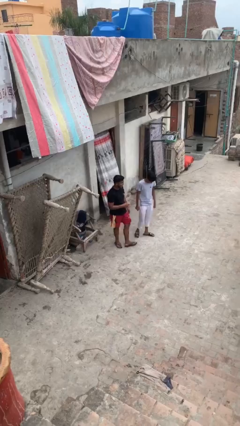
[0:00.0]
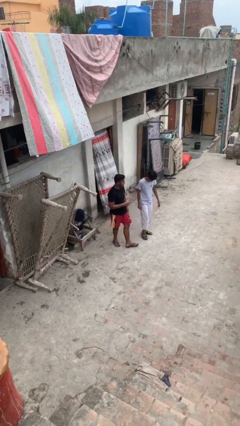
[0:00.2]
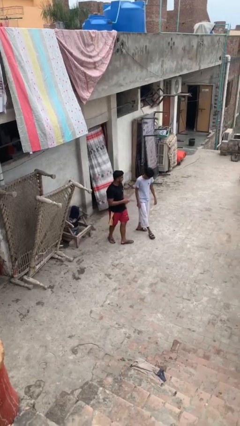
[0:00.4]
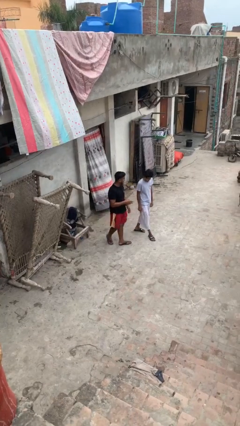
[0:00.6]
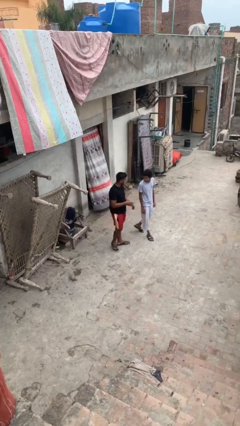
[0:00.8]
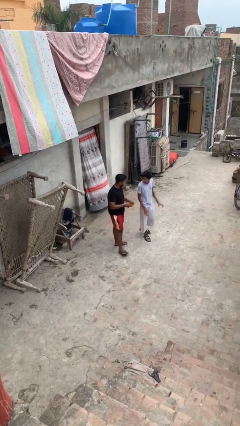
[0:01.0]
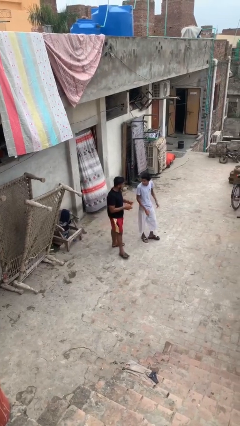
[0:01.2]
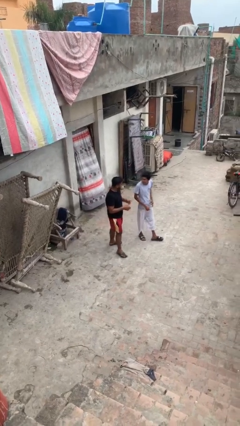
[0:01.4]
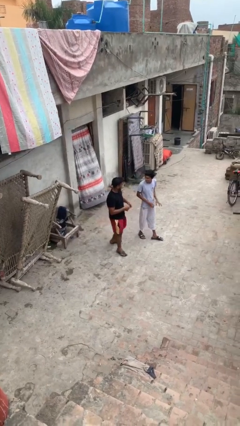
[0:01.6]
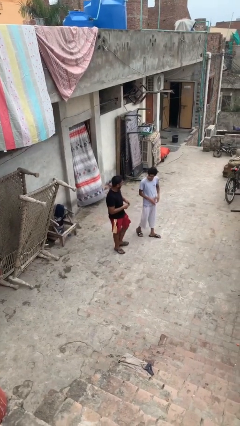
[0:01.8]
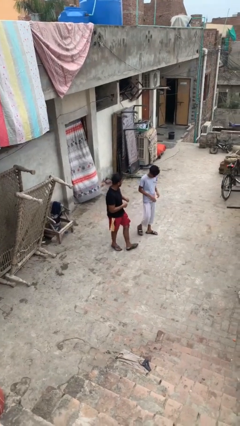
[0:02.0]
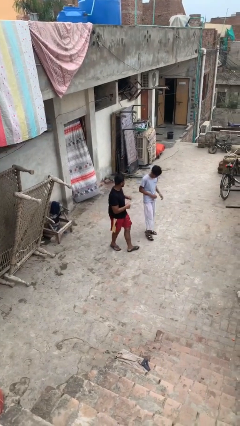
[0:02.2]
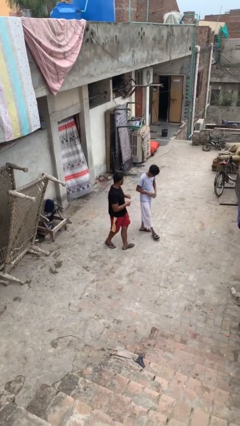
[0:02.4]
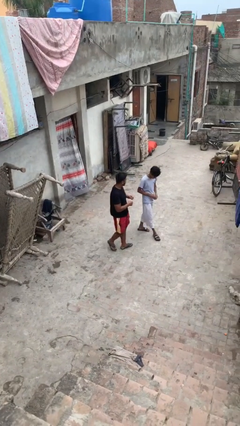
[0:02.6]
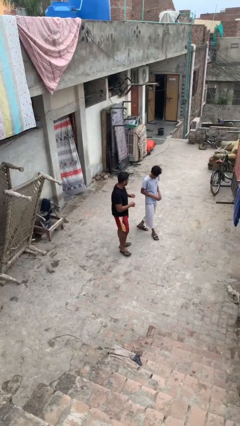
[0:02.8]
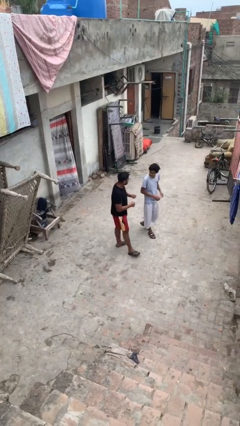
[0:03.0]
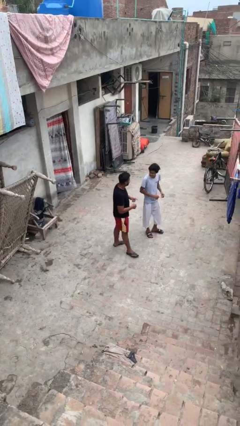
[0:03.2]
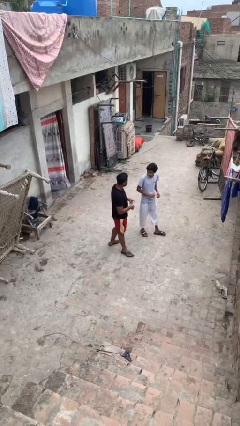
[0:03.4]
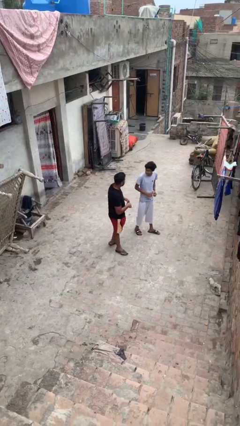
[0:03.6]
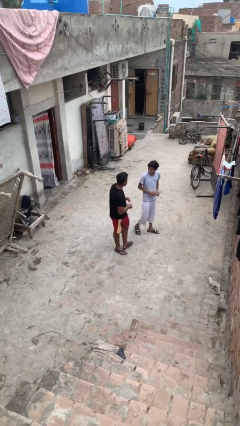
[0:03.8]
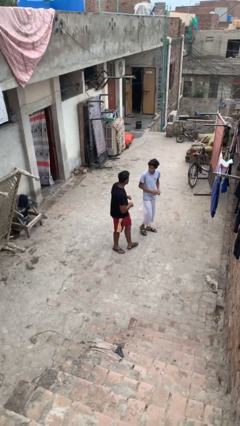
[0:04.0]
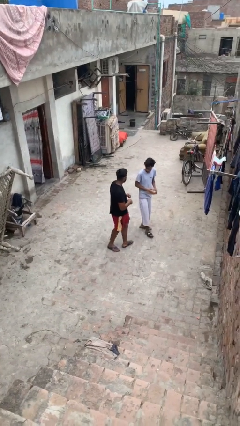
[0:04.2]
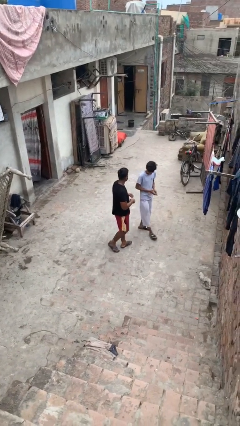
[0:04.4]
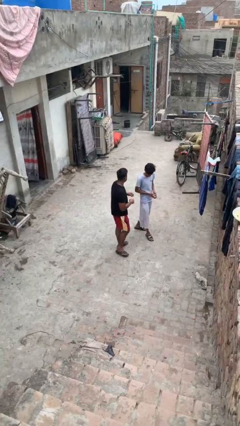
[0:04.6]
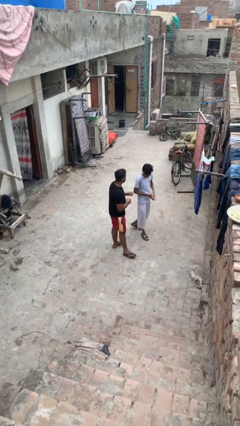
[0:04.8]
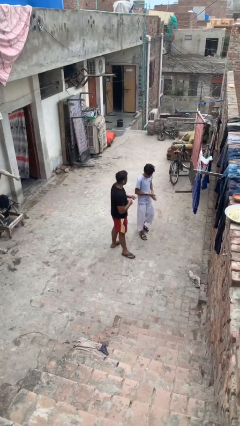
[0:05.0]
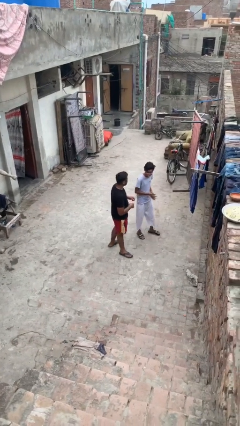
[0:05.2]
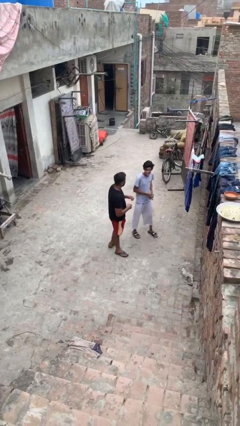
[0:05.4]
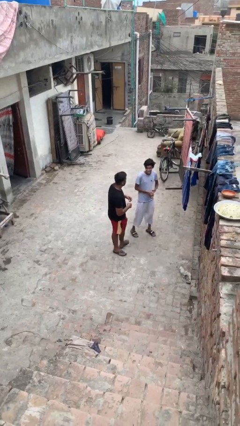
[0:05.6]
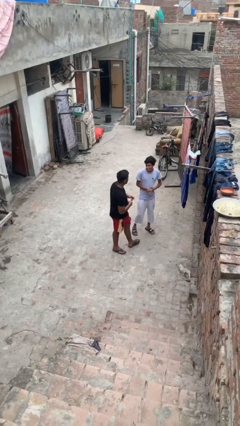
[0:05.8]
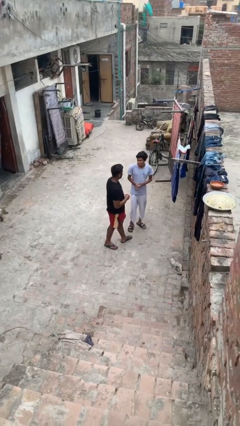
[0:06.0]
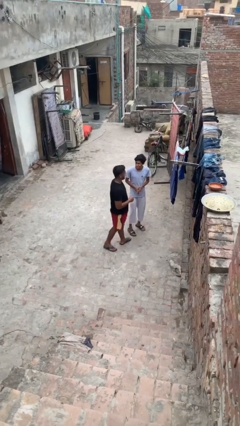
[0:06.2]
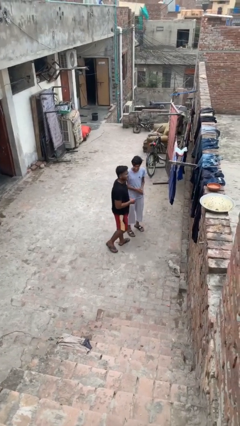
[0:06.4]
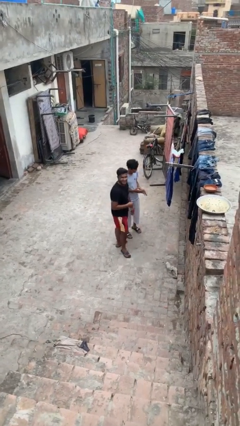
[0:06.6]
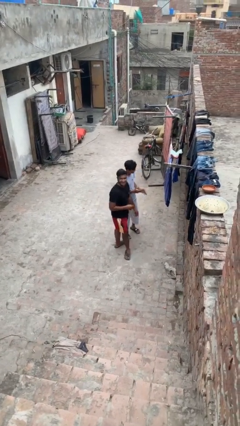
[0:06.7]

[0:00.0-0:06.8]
person talks to person

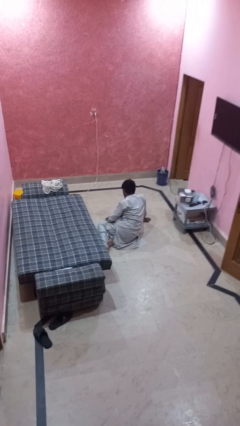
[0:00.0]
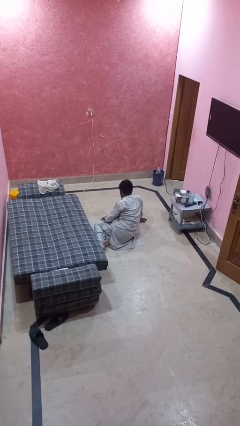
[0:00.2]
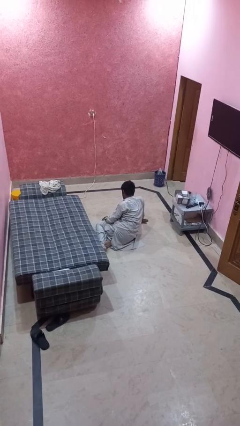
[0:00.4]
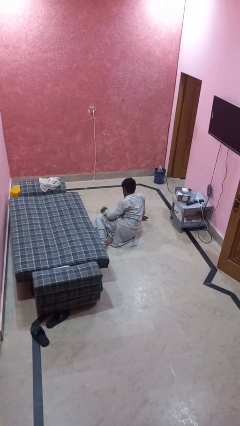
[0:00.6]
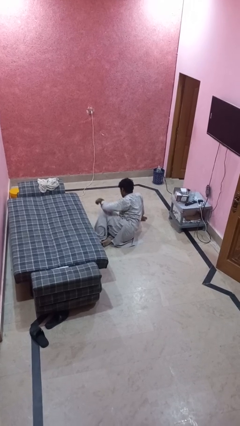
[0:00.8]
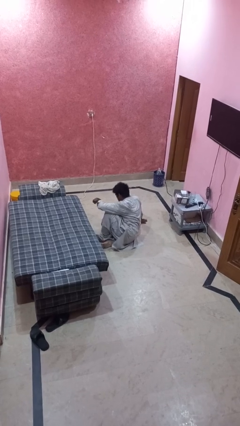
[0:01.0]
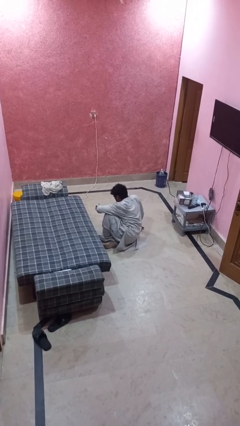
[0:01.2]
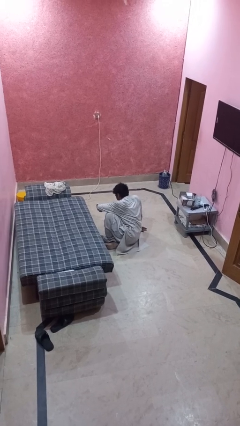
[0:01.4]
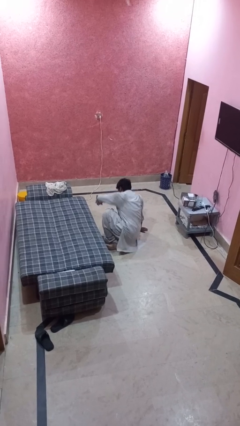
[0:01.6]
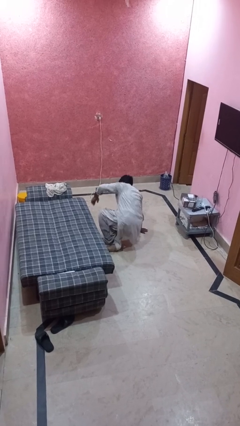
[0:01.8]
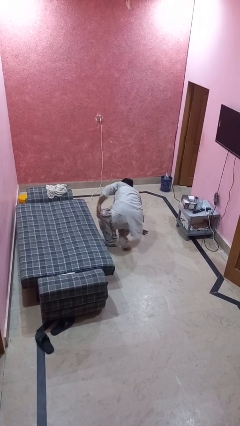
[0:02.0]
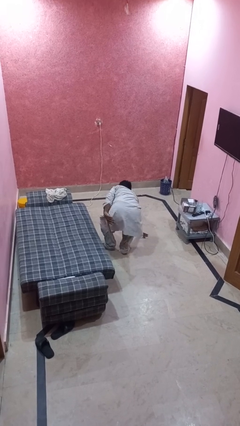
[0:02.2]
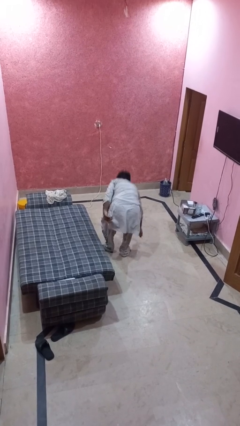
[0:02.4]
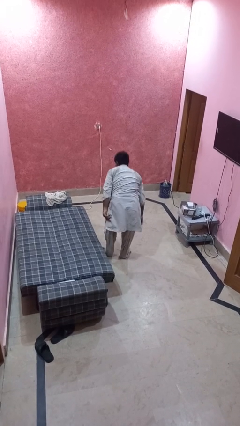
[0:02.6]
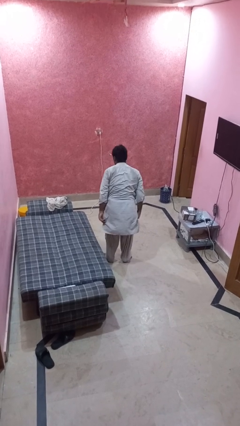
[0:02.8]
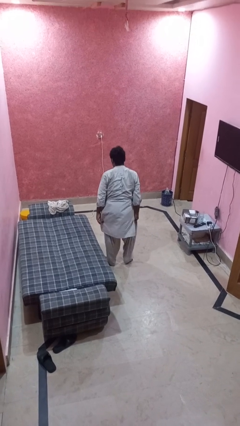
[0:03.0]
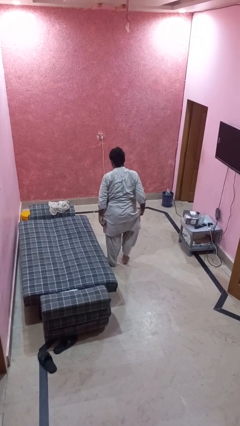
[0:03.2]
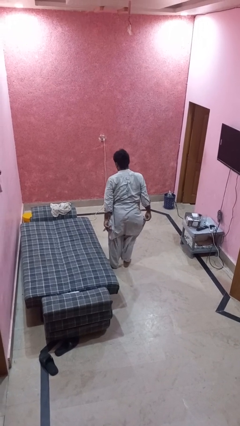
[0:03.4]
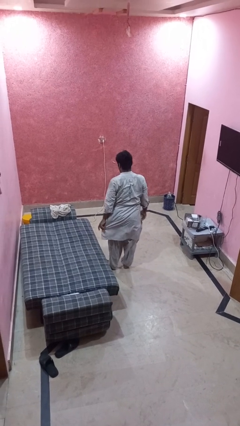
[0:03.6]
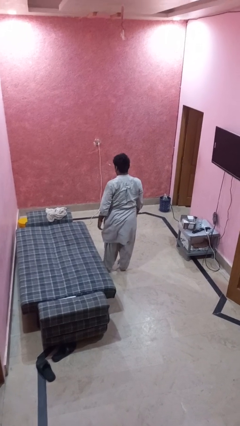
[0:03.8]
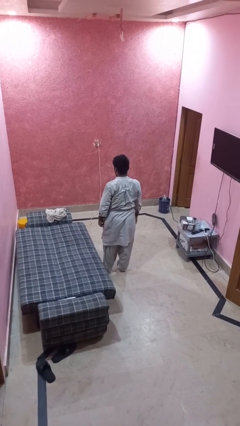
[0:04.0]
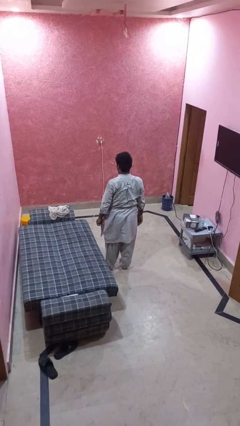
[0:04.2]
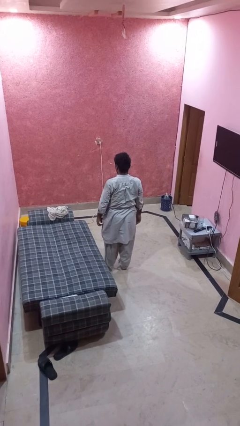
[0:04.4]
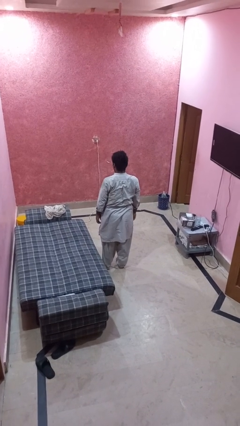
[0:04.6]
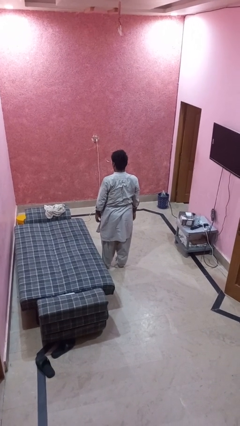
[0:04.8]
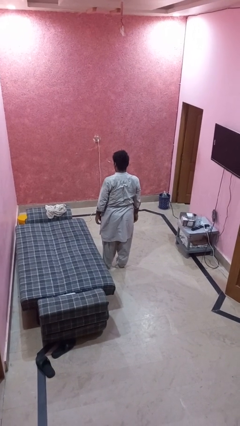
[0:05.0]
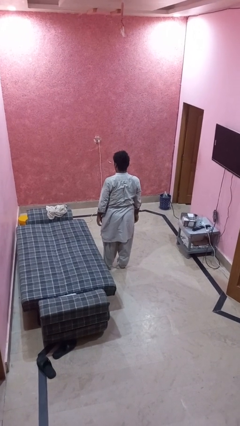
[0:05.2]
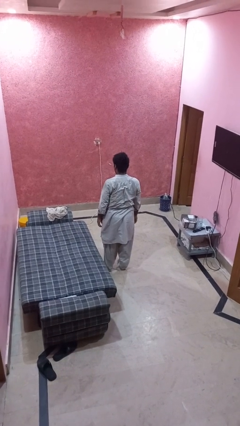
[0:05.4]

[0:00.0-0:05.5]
person stands up from floor

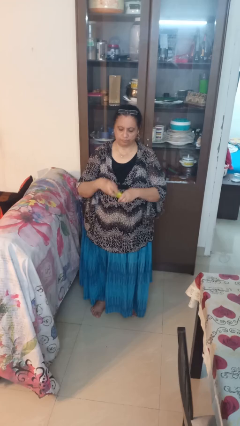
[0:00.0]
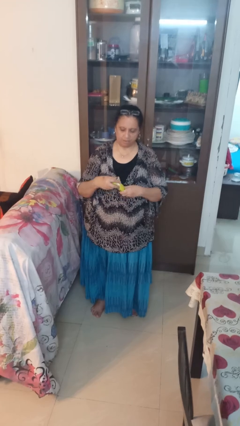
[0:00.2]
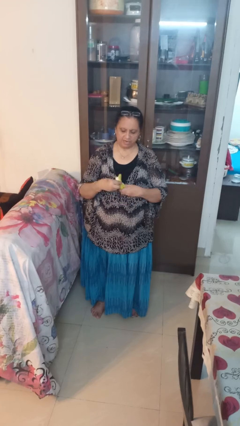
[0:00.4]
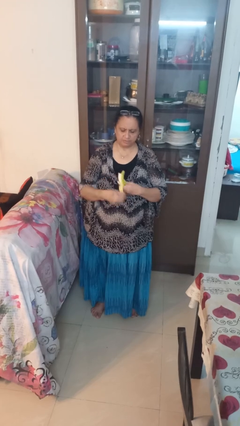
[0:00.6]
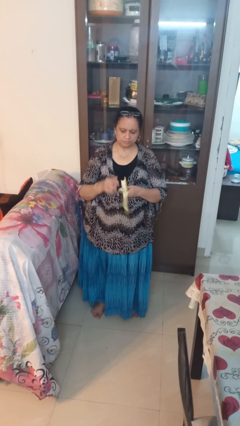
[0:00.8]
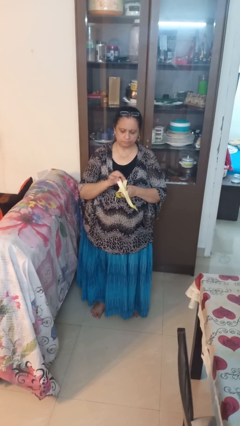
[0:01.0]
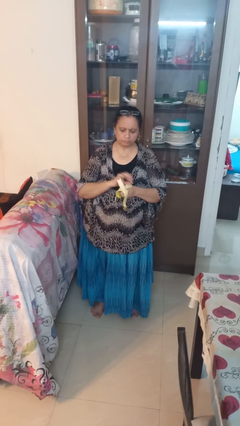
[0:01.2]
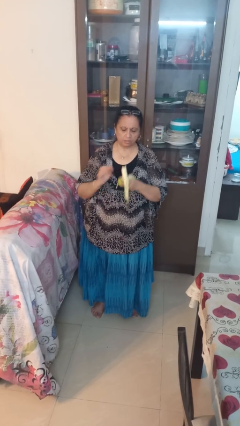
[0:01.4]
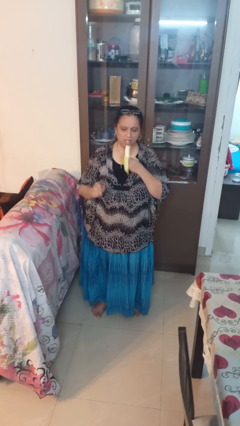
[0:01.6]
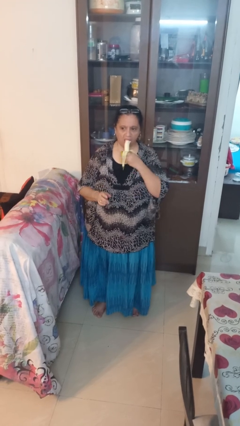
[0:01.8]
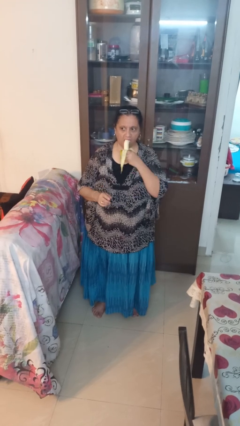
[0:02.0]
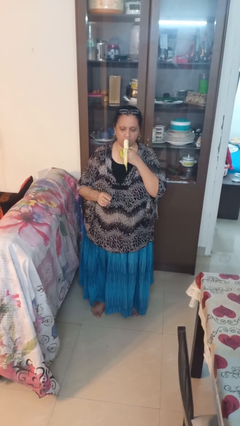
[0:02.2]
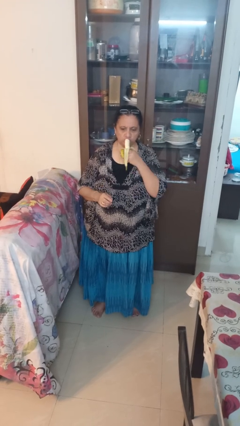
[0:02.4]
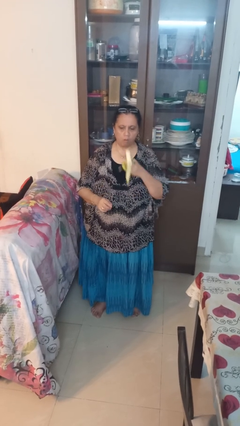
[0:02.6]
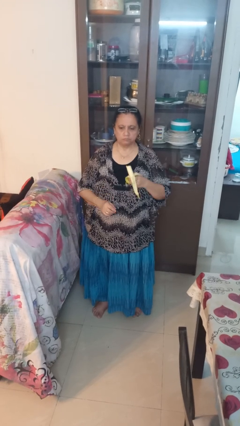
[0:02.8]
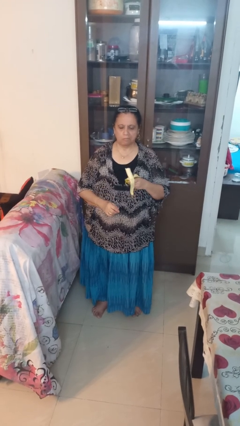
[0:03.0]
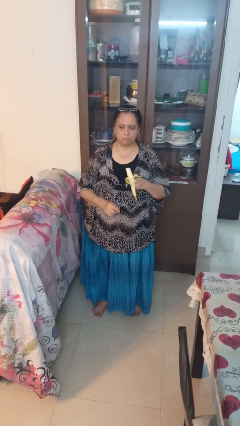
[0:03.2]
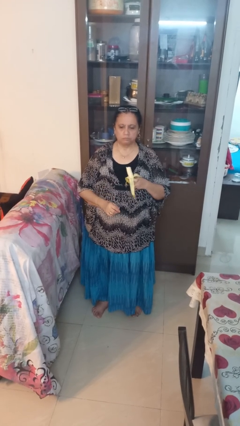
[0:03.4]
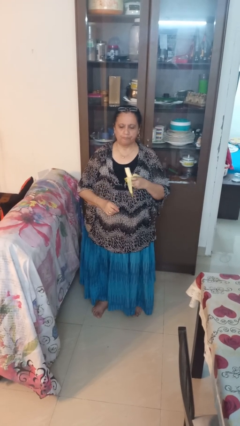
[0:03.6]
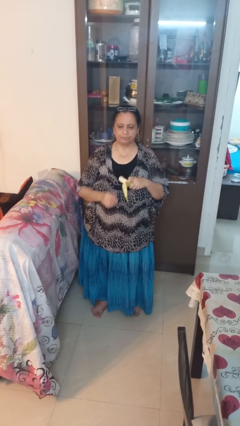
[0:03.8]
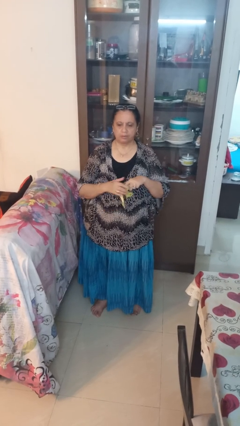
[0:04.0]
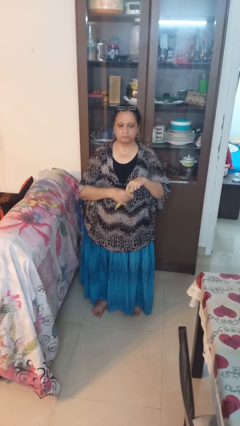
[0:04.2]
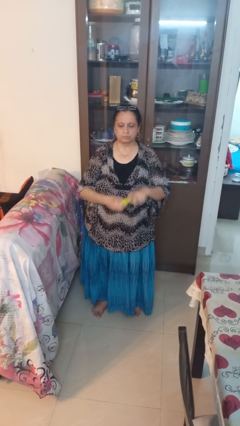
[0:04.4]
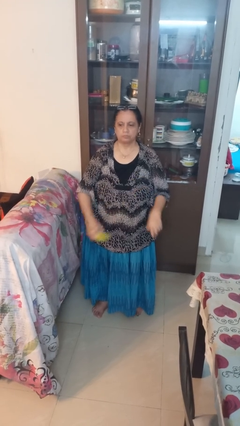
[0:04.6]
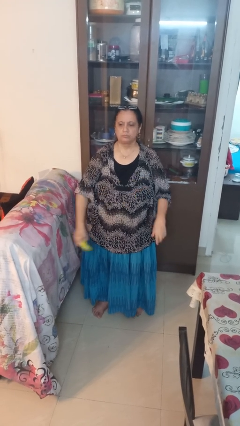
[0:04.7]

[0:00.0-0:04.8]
person eats banana

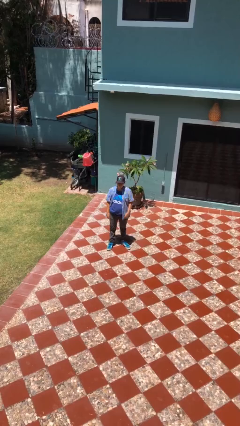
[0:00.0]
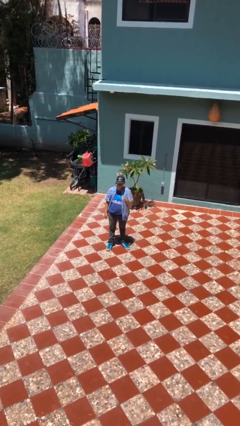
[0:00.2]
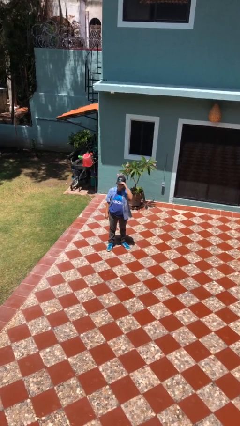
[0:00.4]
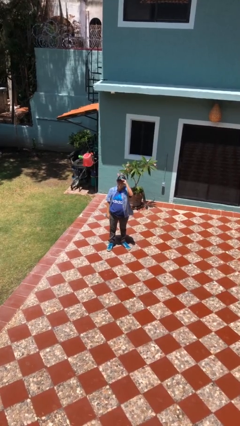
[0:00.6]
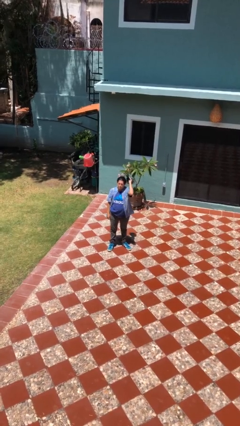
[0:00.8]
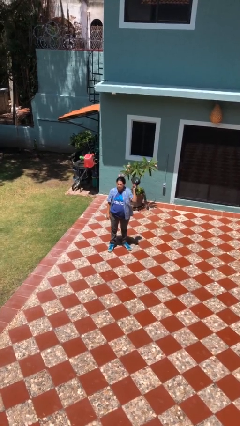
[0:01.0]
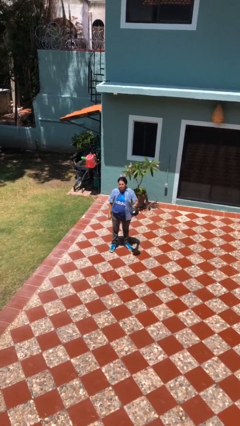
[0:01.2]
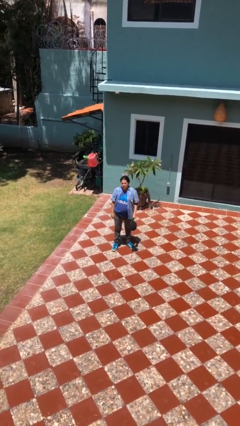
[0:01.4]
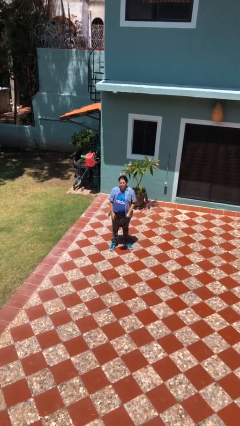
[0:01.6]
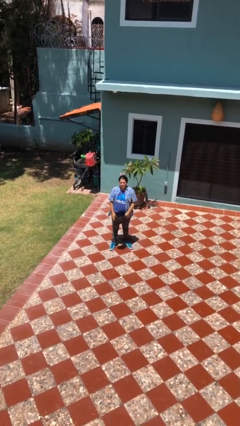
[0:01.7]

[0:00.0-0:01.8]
person takes off hat
